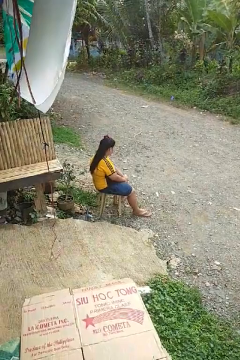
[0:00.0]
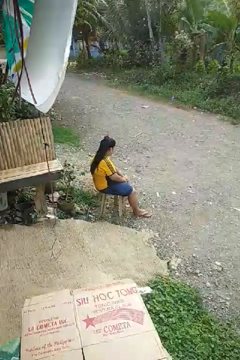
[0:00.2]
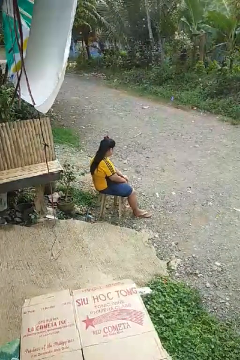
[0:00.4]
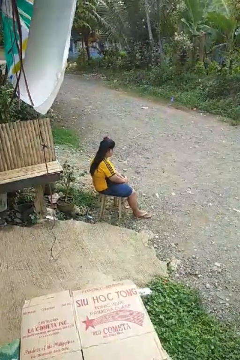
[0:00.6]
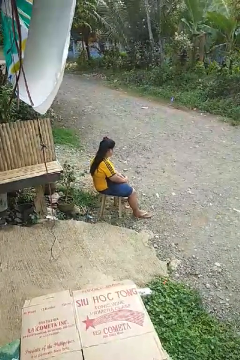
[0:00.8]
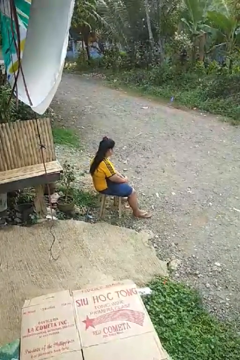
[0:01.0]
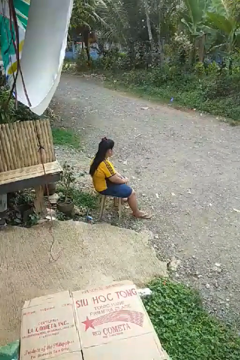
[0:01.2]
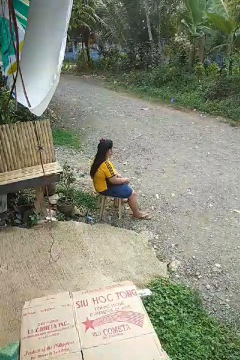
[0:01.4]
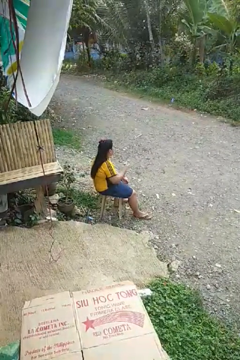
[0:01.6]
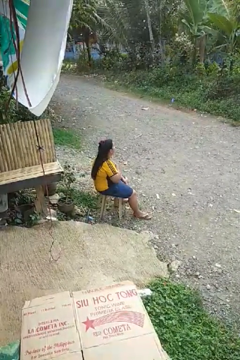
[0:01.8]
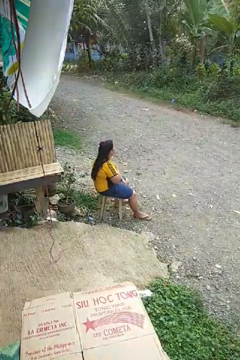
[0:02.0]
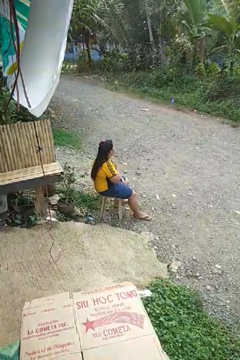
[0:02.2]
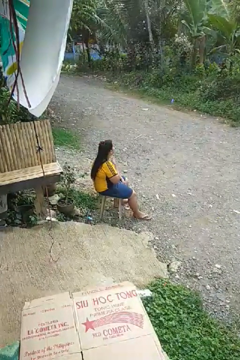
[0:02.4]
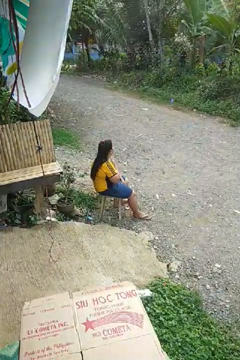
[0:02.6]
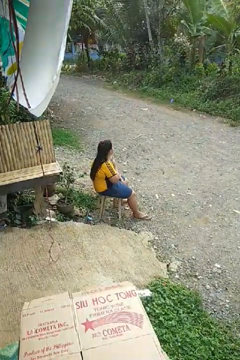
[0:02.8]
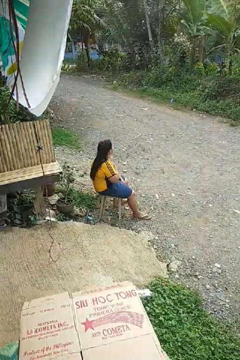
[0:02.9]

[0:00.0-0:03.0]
person drums on chest

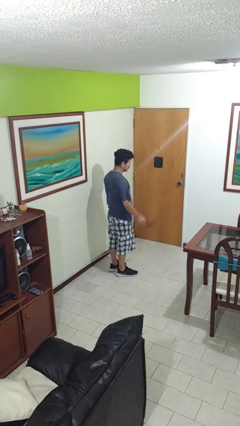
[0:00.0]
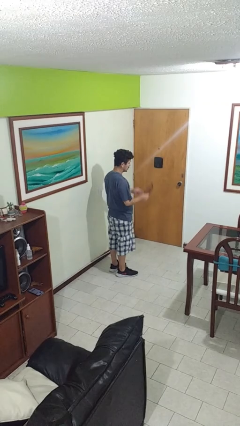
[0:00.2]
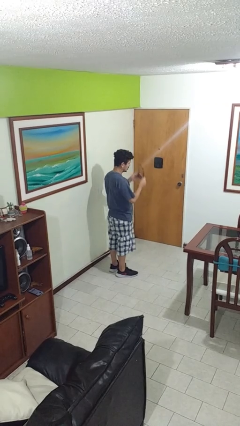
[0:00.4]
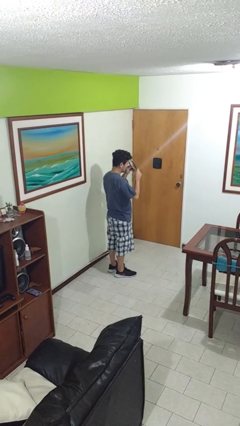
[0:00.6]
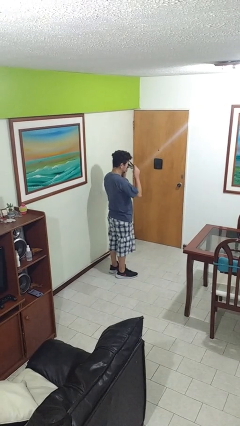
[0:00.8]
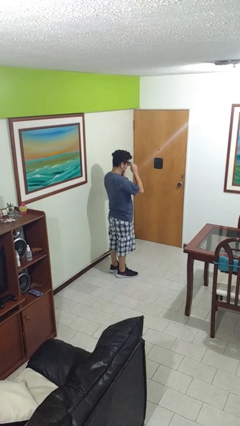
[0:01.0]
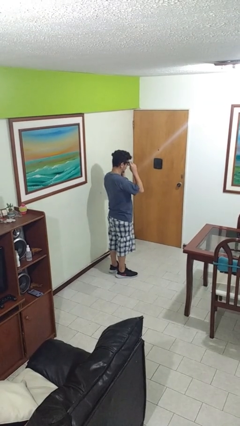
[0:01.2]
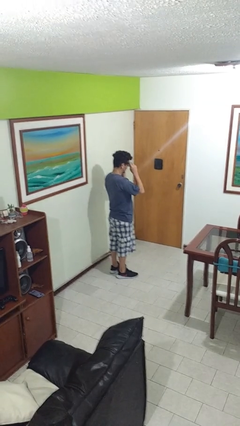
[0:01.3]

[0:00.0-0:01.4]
person puts on sunglasses

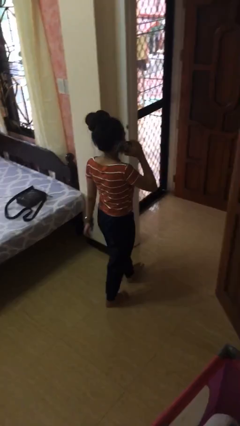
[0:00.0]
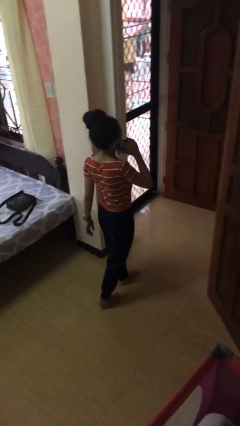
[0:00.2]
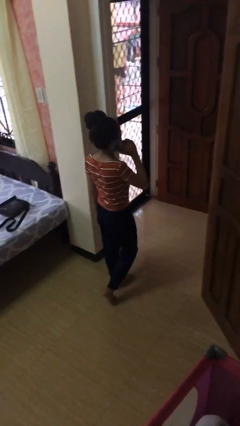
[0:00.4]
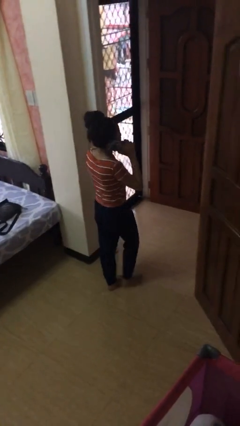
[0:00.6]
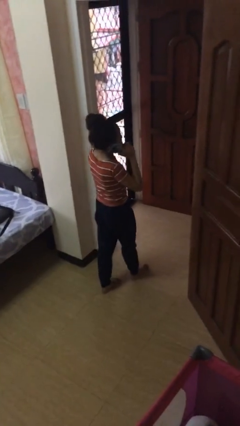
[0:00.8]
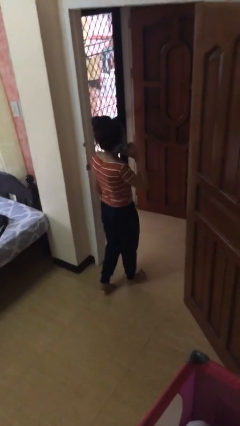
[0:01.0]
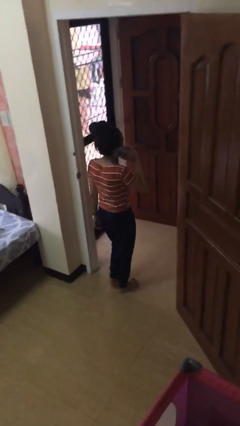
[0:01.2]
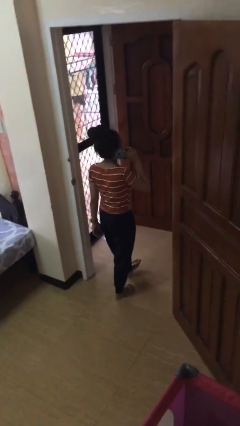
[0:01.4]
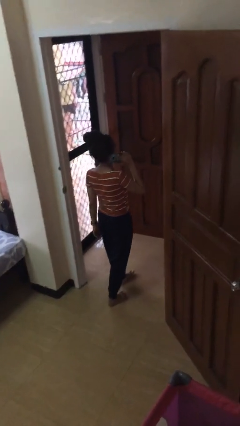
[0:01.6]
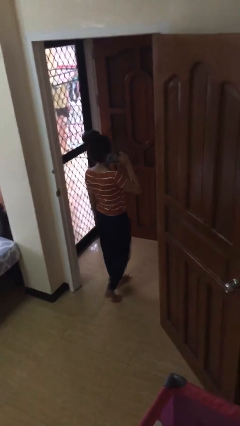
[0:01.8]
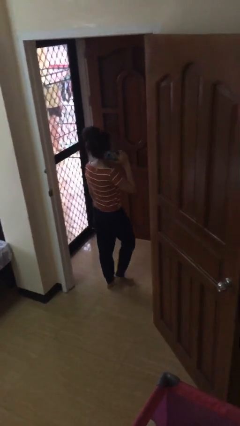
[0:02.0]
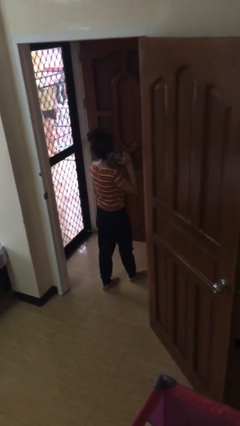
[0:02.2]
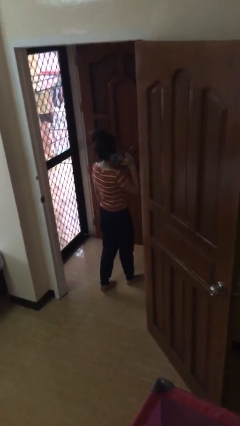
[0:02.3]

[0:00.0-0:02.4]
person exits scene through structure

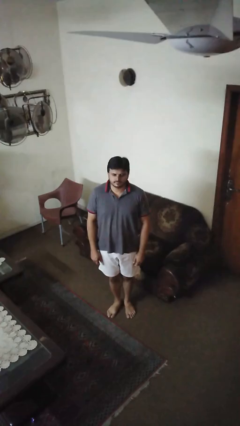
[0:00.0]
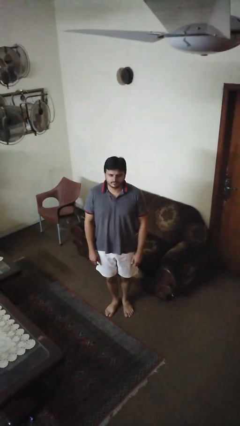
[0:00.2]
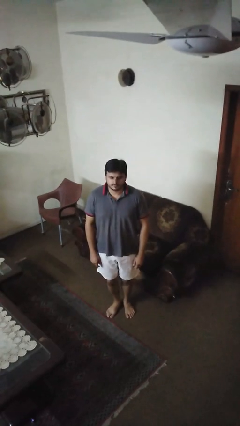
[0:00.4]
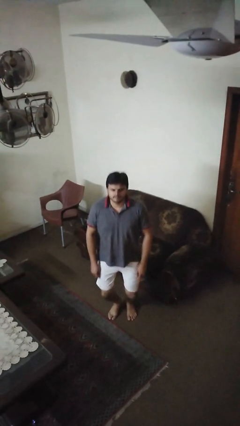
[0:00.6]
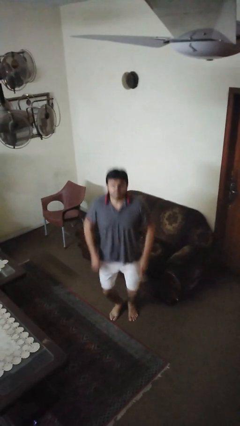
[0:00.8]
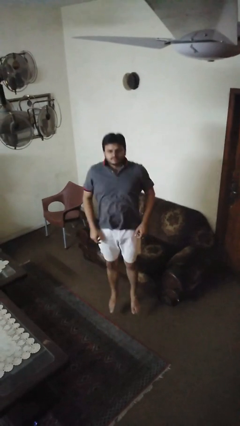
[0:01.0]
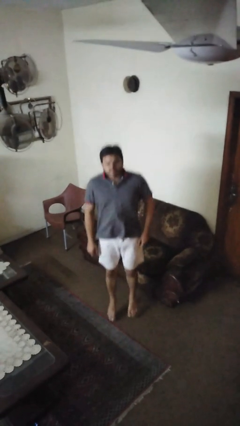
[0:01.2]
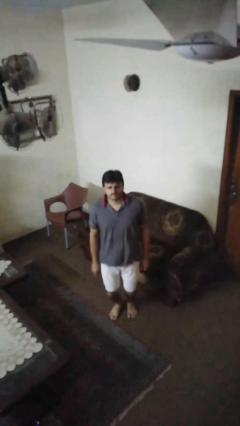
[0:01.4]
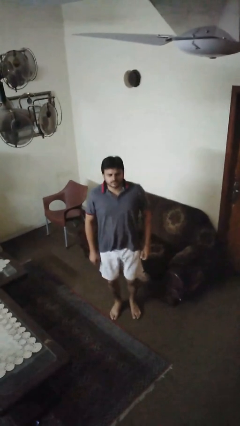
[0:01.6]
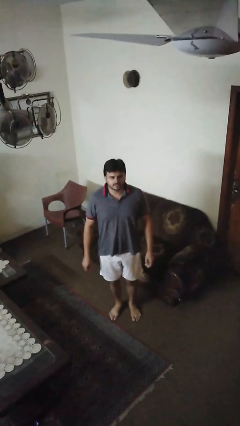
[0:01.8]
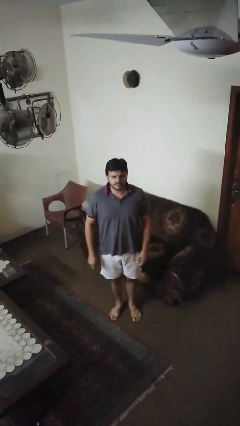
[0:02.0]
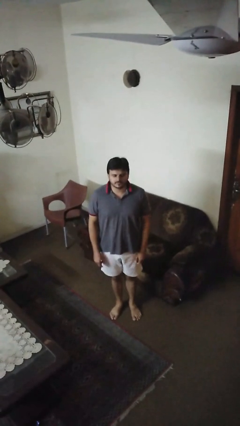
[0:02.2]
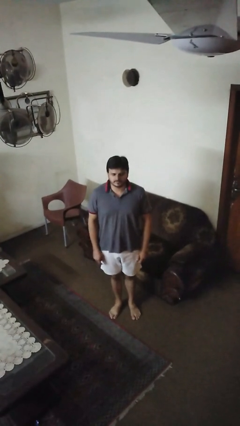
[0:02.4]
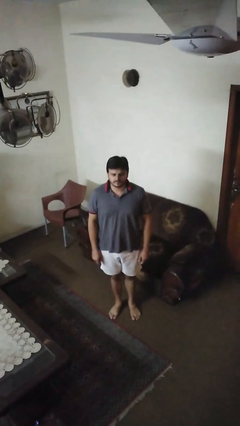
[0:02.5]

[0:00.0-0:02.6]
person jumps

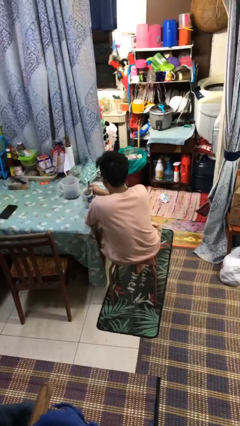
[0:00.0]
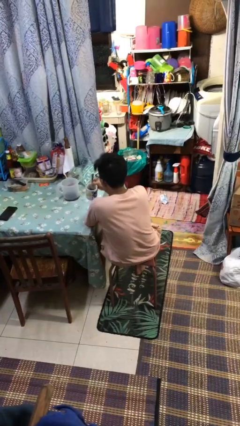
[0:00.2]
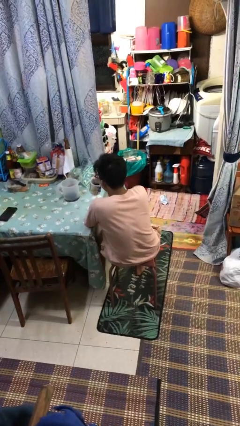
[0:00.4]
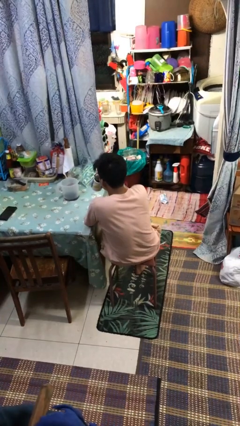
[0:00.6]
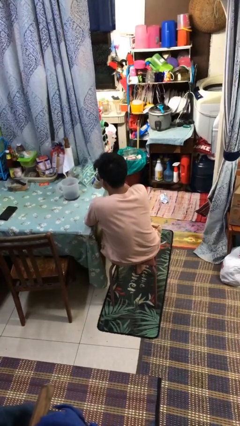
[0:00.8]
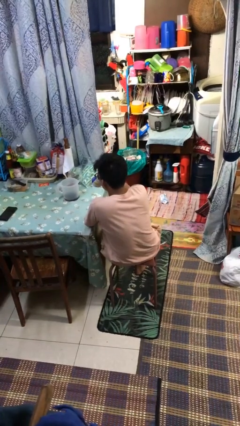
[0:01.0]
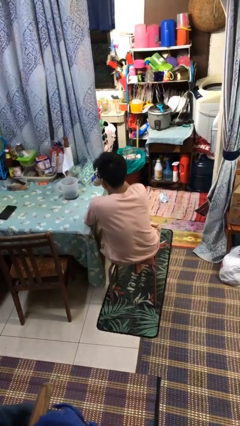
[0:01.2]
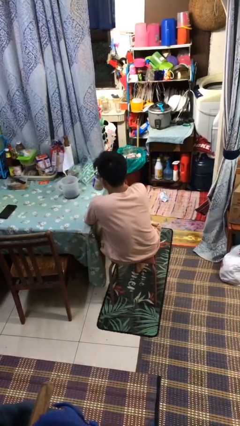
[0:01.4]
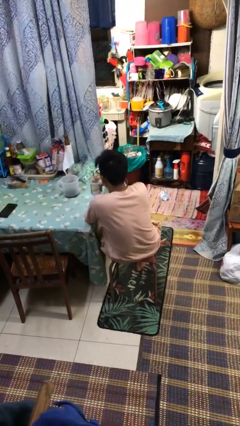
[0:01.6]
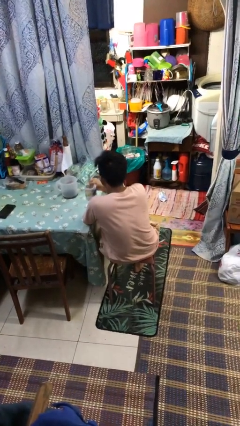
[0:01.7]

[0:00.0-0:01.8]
person drinks from mug

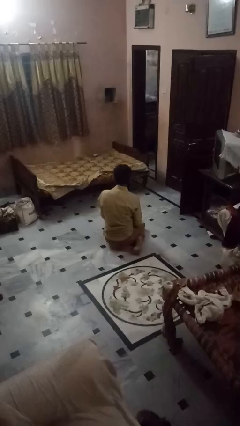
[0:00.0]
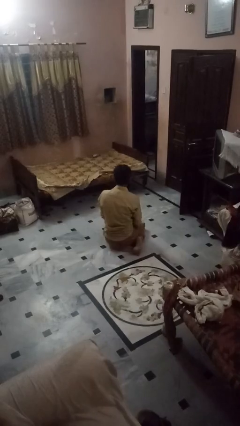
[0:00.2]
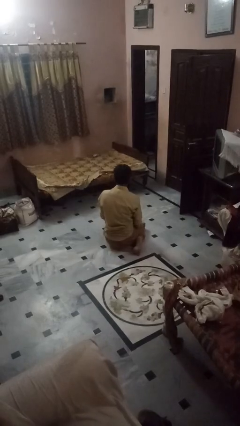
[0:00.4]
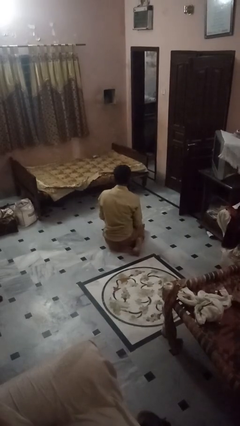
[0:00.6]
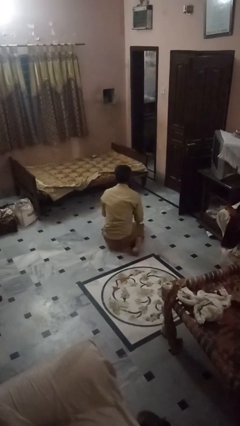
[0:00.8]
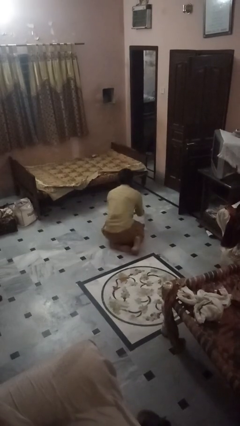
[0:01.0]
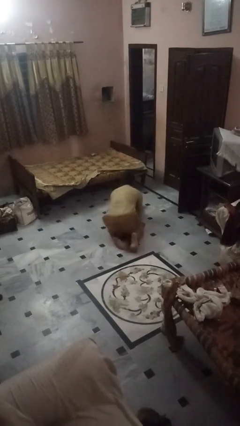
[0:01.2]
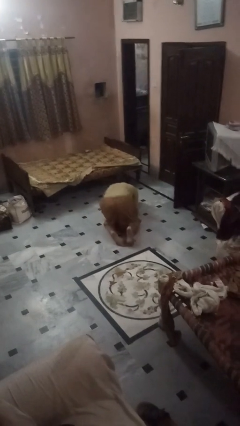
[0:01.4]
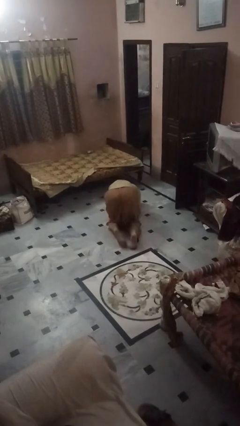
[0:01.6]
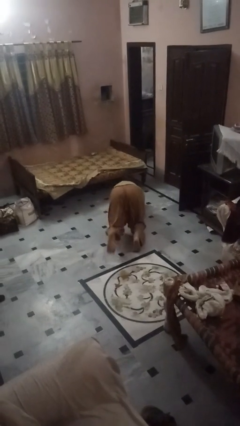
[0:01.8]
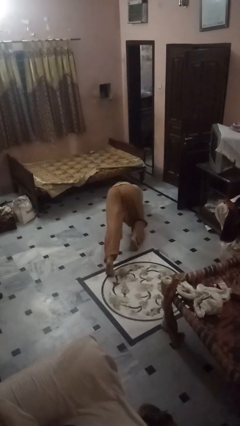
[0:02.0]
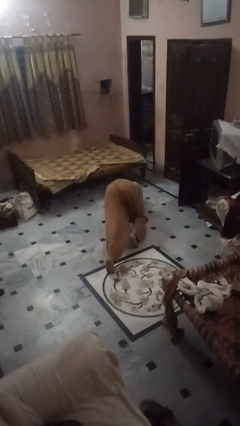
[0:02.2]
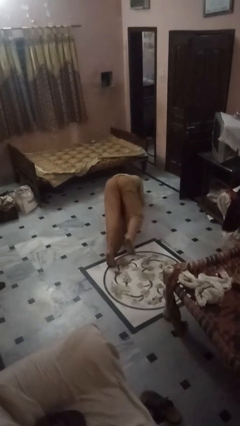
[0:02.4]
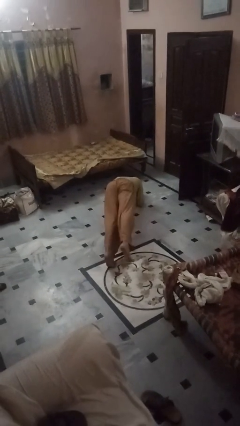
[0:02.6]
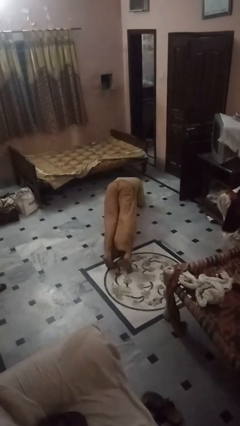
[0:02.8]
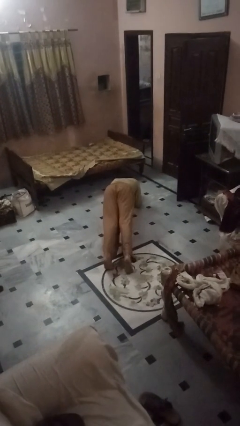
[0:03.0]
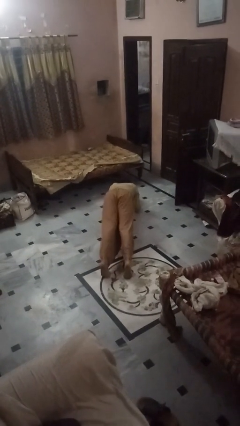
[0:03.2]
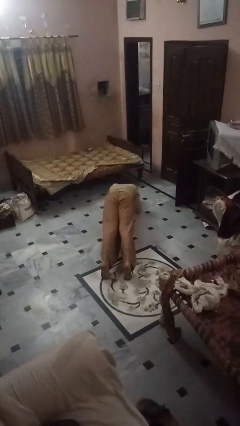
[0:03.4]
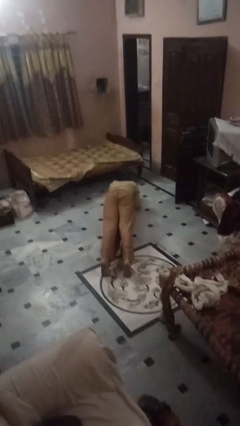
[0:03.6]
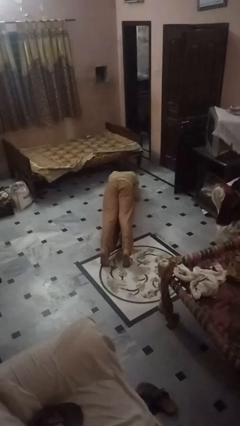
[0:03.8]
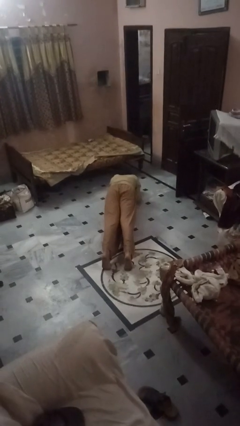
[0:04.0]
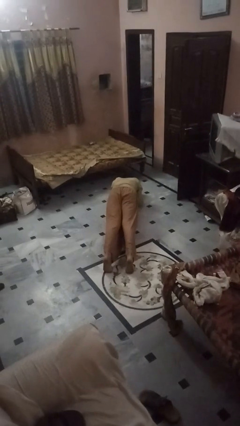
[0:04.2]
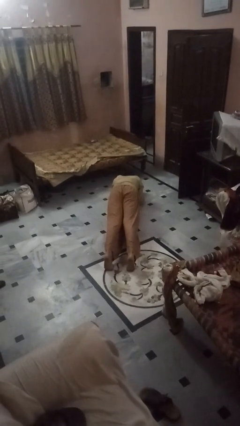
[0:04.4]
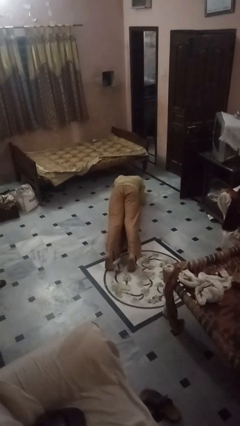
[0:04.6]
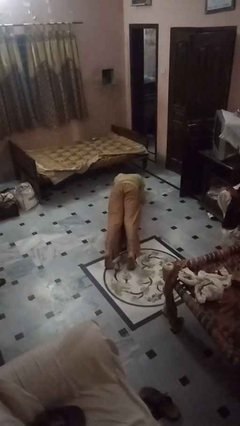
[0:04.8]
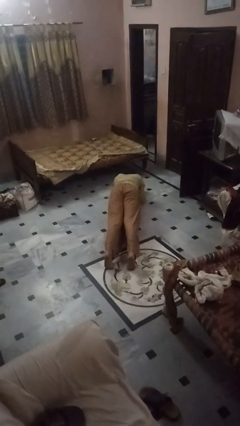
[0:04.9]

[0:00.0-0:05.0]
person exercises with plank

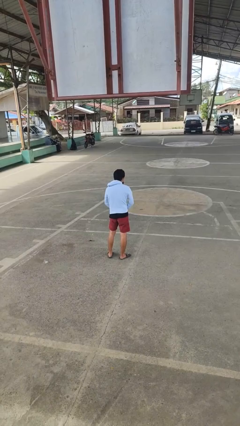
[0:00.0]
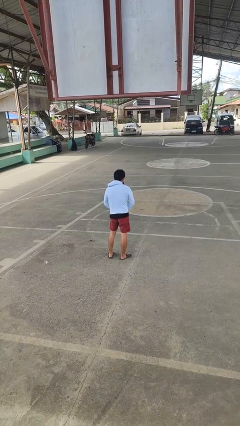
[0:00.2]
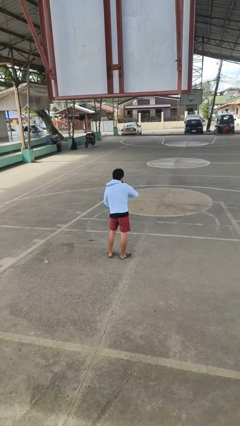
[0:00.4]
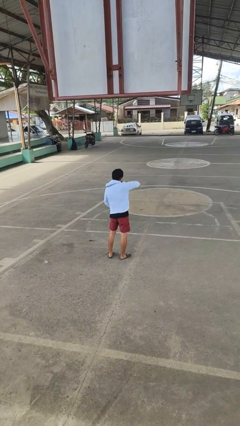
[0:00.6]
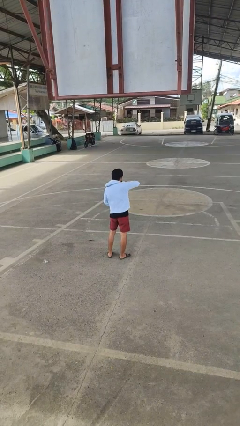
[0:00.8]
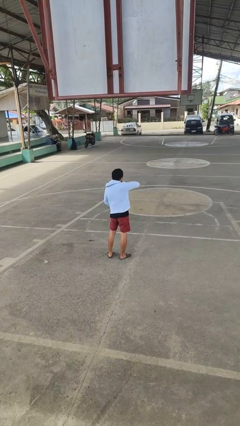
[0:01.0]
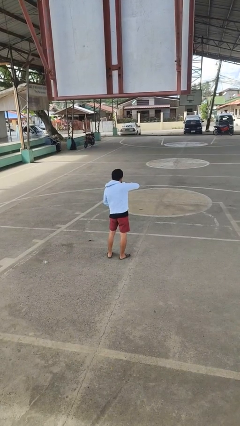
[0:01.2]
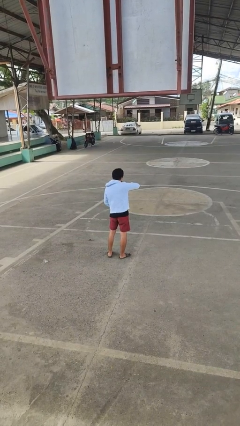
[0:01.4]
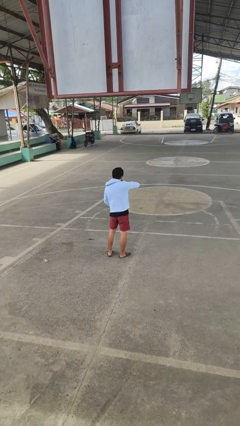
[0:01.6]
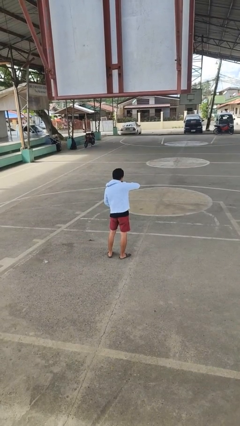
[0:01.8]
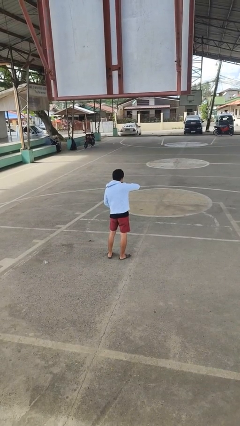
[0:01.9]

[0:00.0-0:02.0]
person zips up jacket
